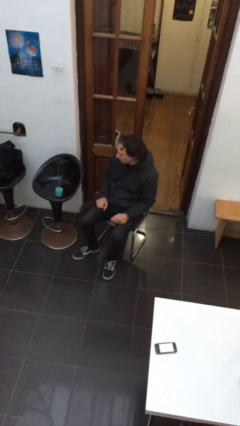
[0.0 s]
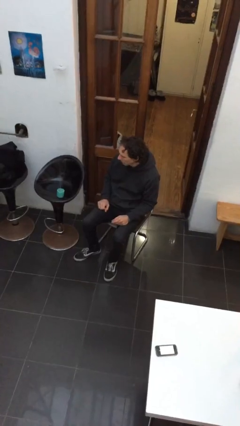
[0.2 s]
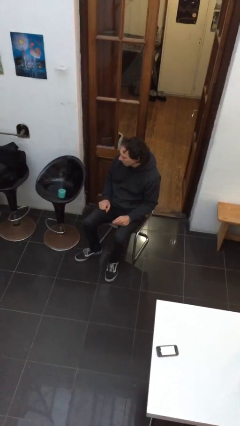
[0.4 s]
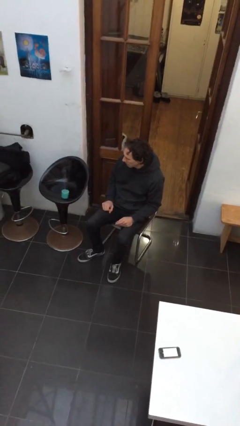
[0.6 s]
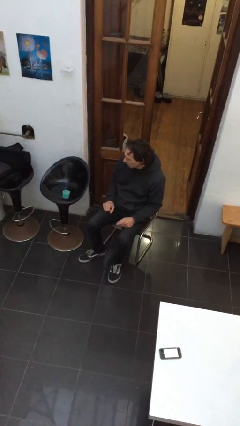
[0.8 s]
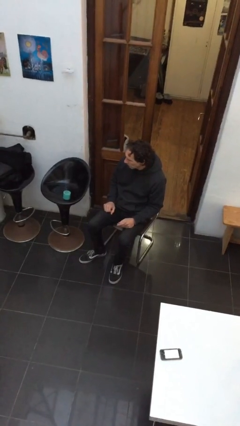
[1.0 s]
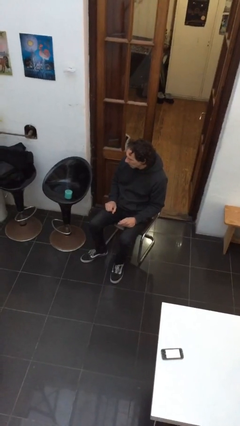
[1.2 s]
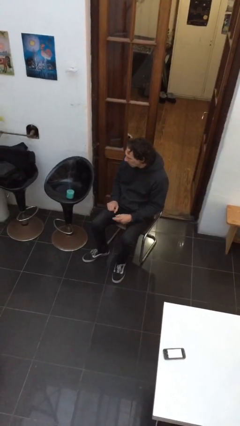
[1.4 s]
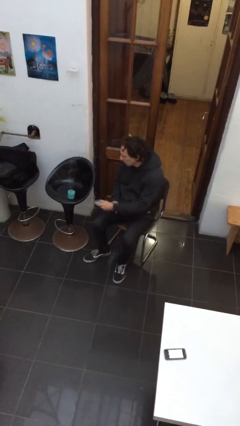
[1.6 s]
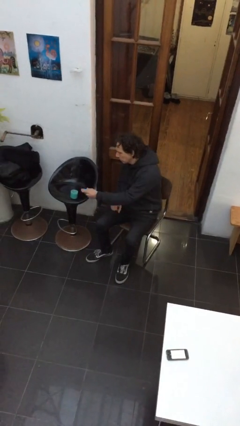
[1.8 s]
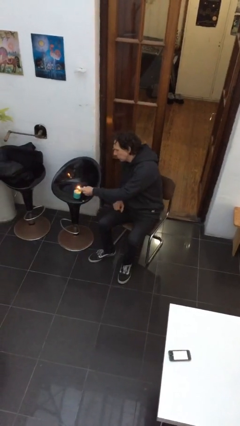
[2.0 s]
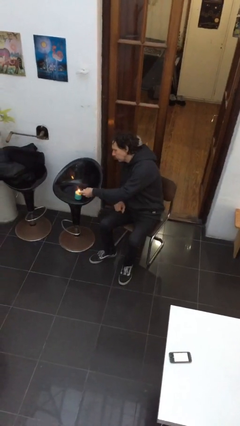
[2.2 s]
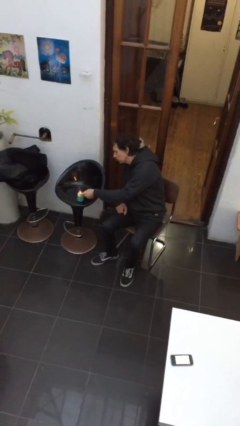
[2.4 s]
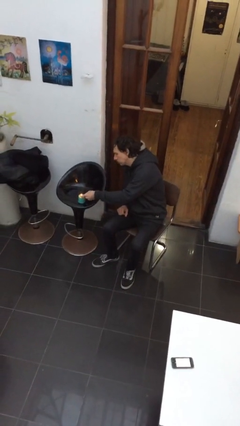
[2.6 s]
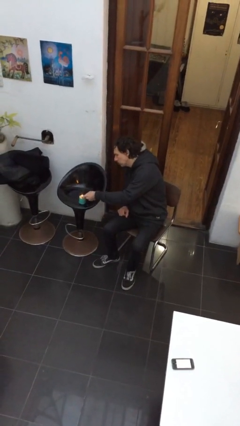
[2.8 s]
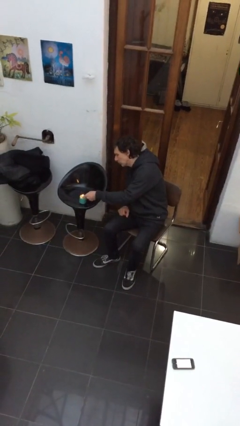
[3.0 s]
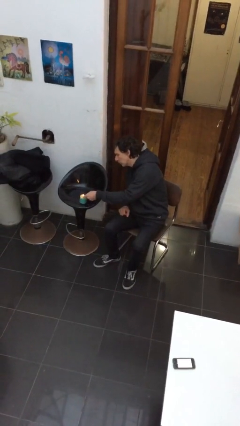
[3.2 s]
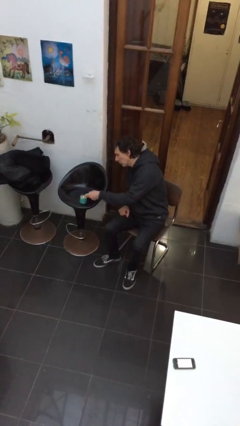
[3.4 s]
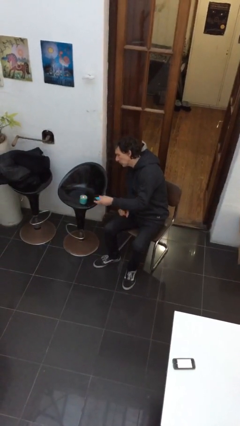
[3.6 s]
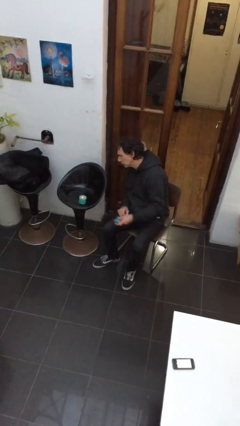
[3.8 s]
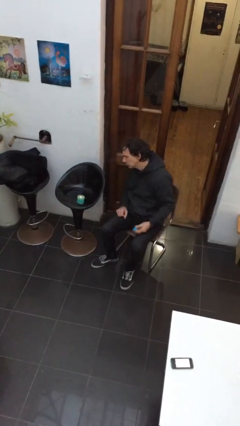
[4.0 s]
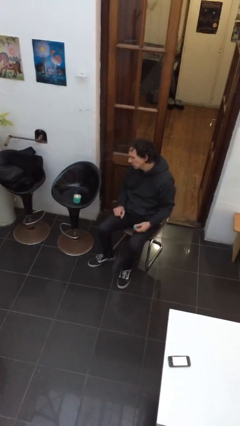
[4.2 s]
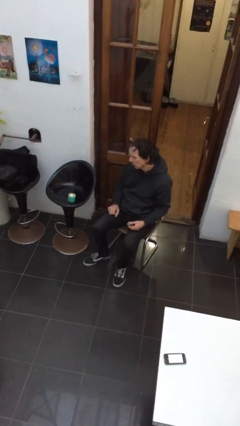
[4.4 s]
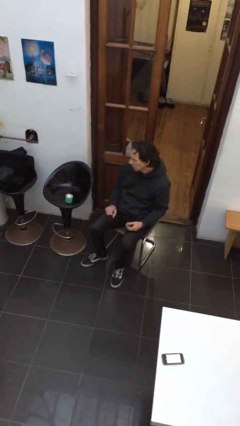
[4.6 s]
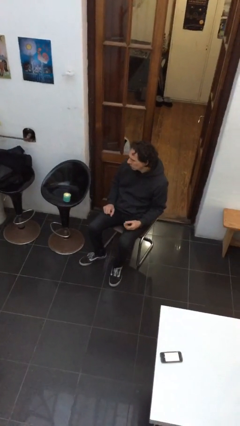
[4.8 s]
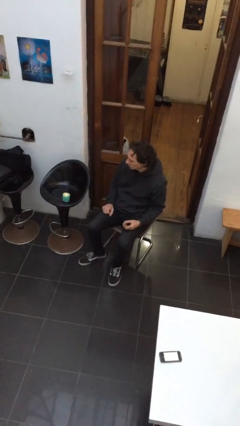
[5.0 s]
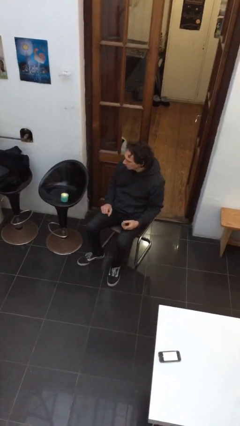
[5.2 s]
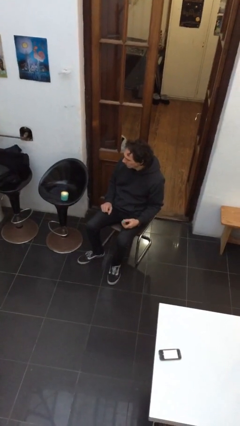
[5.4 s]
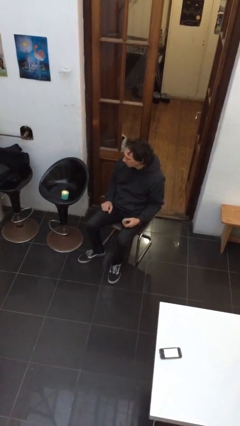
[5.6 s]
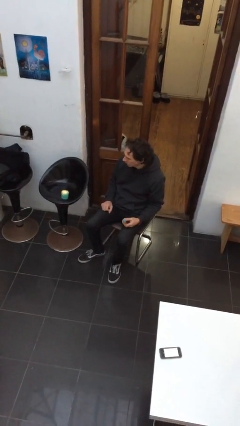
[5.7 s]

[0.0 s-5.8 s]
person lights candle

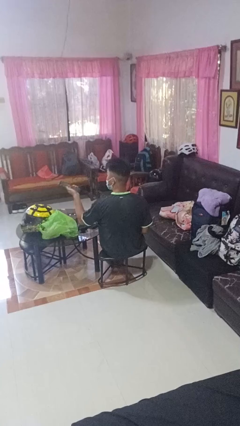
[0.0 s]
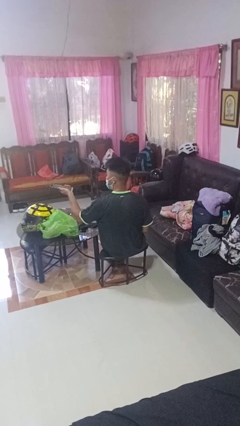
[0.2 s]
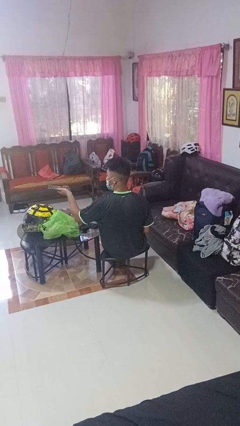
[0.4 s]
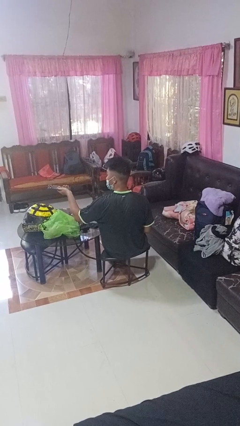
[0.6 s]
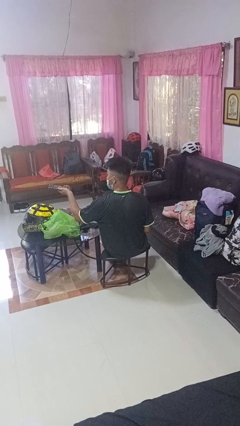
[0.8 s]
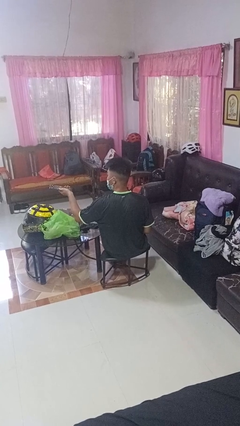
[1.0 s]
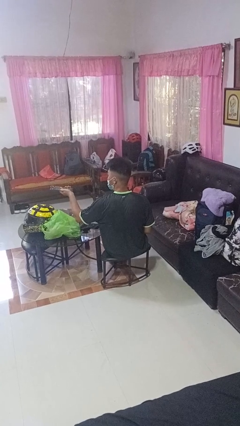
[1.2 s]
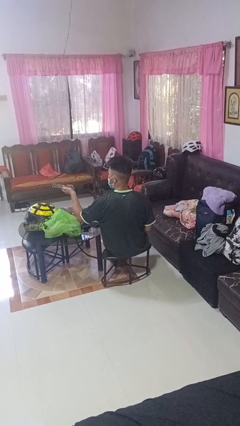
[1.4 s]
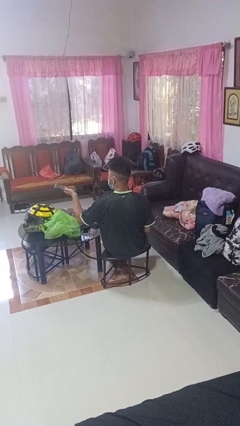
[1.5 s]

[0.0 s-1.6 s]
person uses television remote

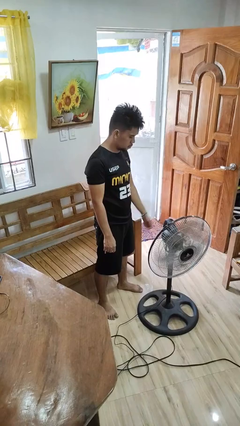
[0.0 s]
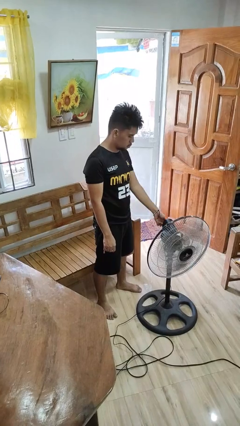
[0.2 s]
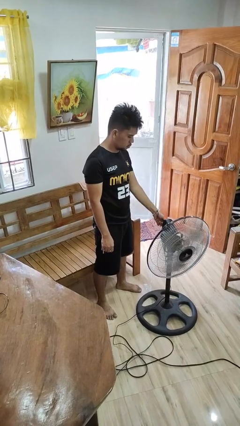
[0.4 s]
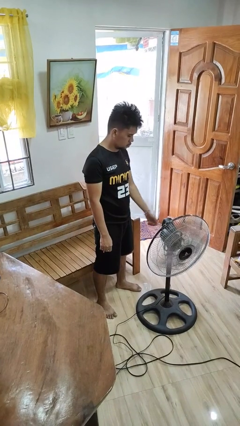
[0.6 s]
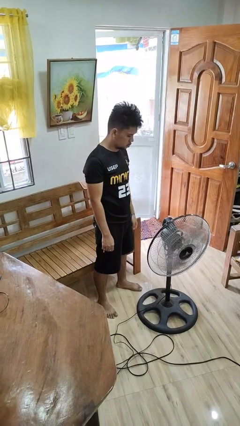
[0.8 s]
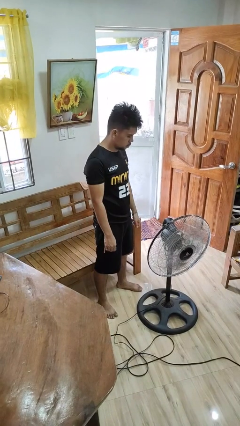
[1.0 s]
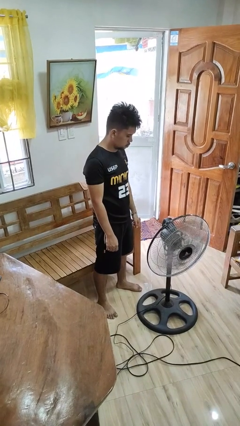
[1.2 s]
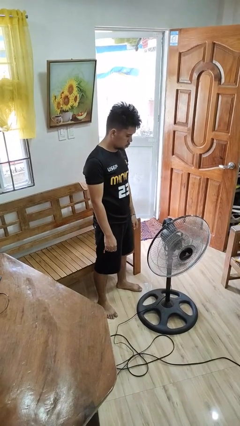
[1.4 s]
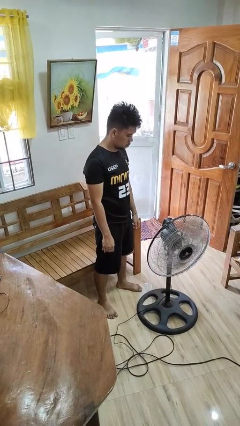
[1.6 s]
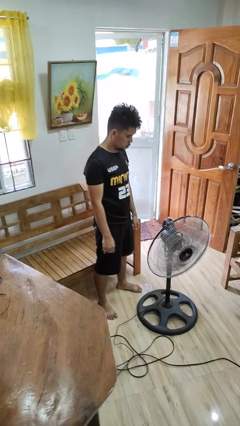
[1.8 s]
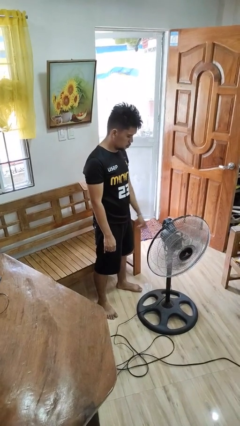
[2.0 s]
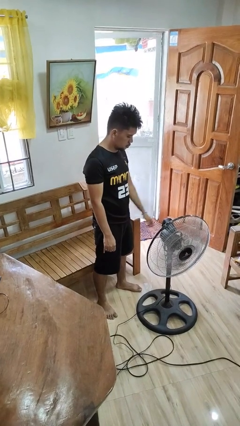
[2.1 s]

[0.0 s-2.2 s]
person turns on fan

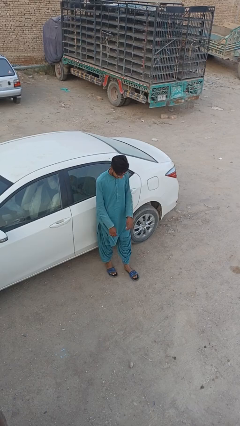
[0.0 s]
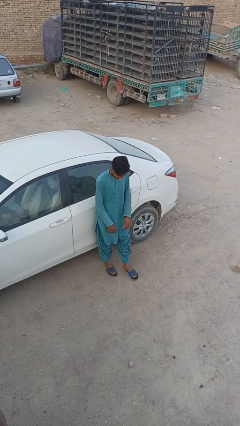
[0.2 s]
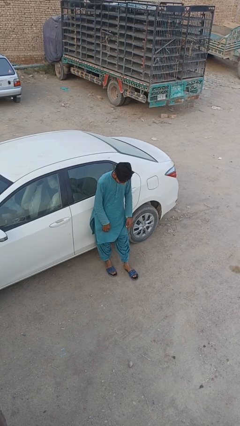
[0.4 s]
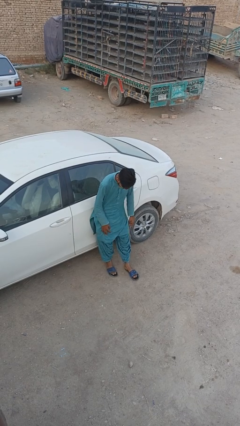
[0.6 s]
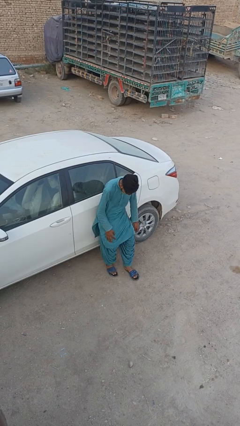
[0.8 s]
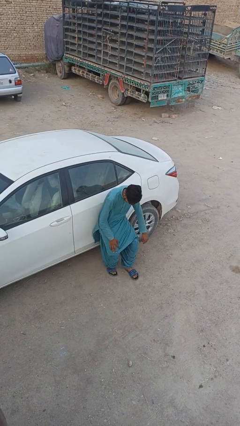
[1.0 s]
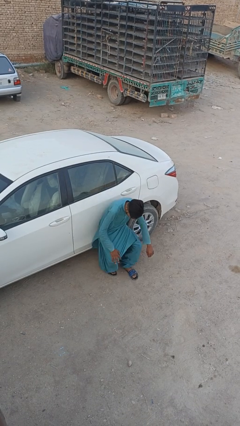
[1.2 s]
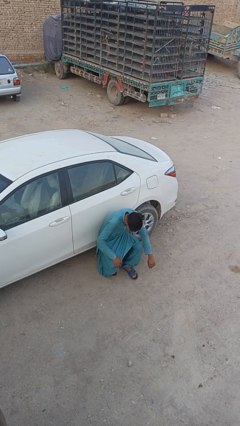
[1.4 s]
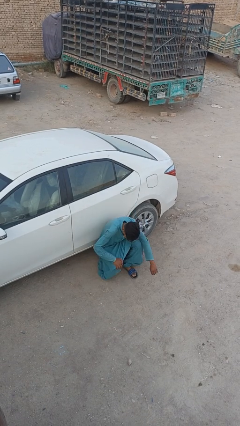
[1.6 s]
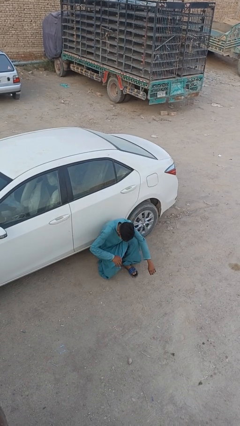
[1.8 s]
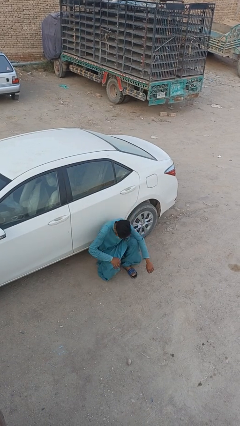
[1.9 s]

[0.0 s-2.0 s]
person leans against car

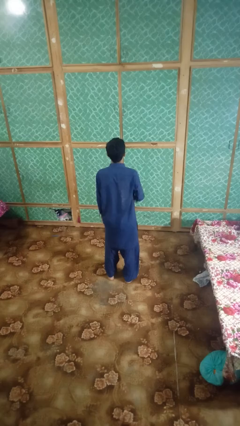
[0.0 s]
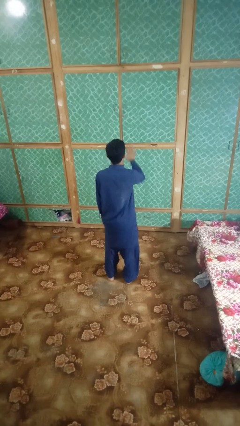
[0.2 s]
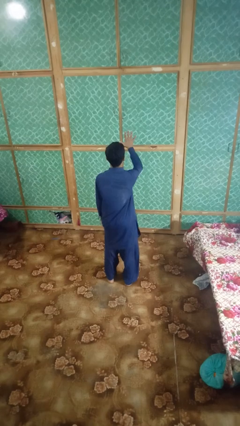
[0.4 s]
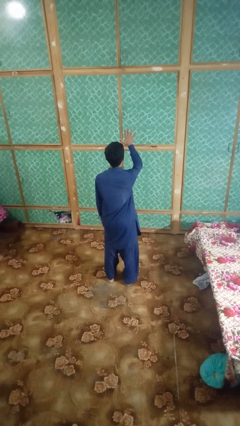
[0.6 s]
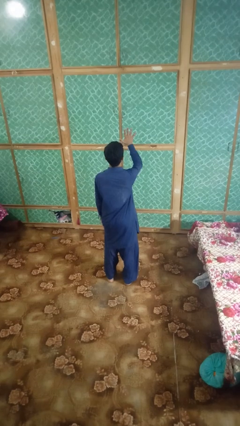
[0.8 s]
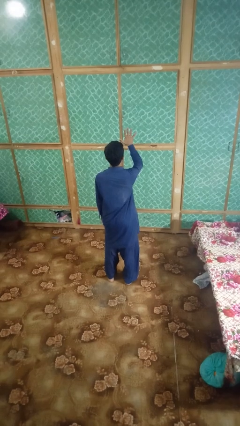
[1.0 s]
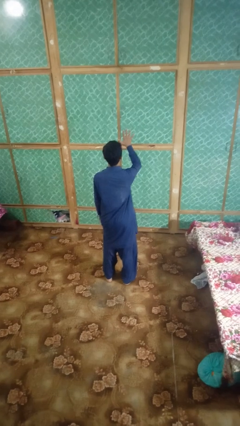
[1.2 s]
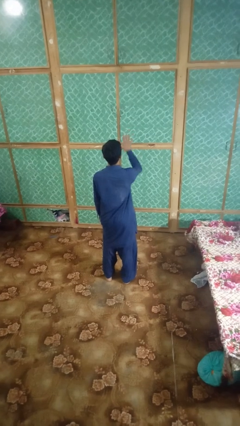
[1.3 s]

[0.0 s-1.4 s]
person gestures number five

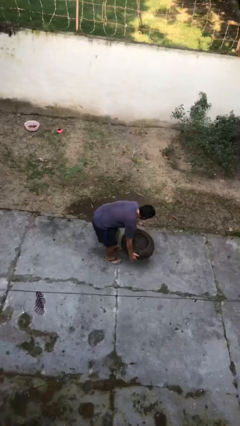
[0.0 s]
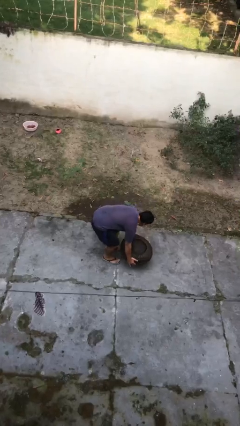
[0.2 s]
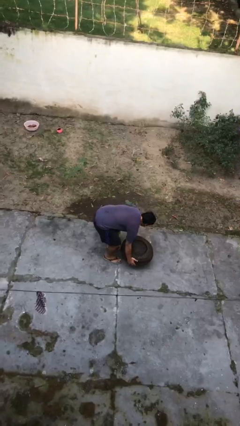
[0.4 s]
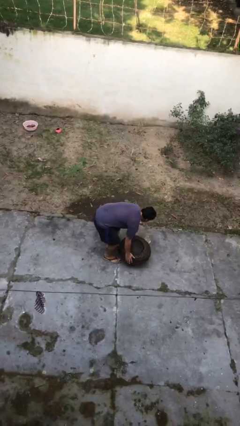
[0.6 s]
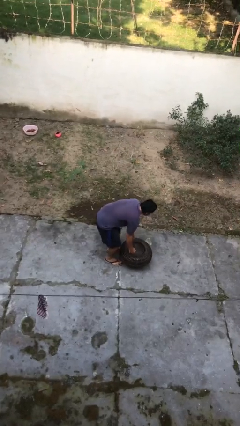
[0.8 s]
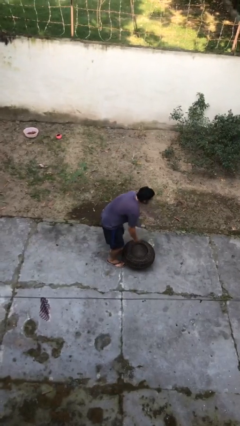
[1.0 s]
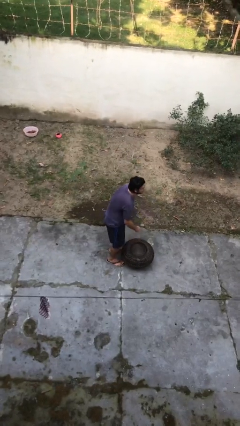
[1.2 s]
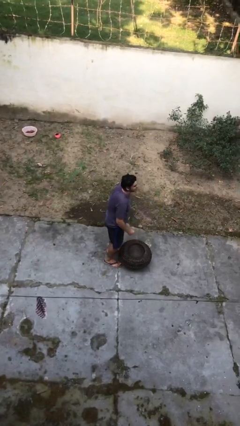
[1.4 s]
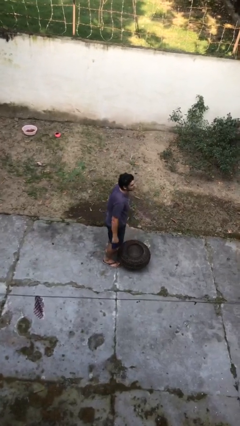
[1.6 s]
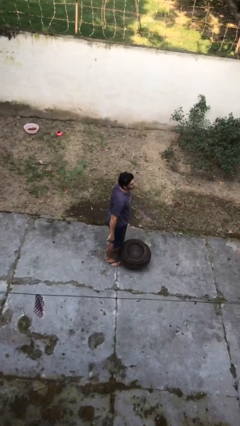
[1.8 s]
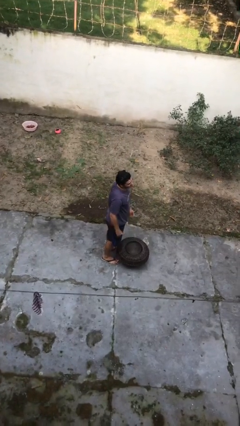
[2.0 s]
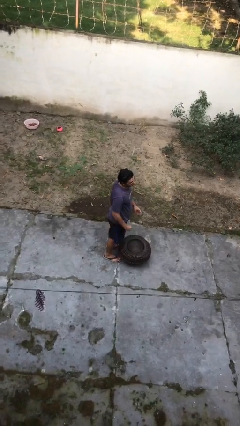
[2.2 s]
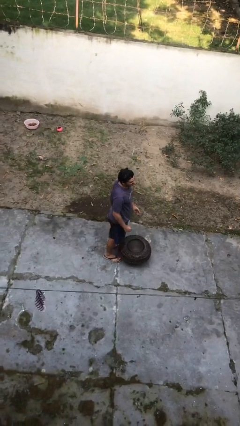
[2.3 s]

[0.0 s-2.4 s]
person puts down object on floor

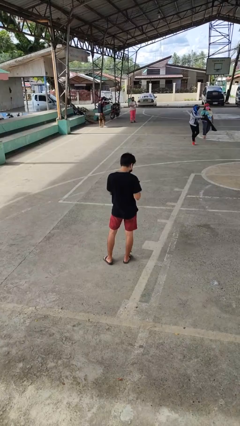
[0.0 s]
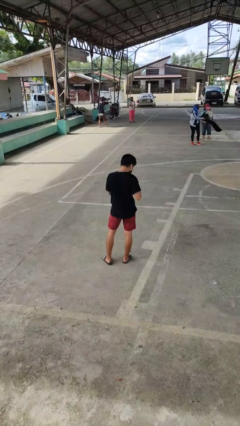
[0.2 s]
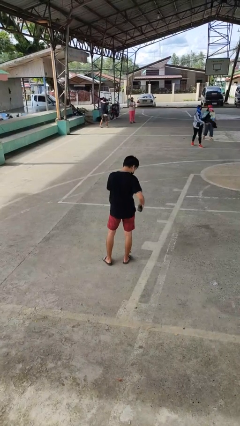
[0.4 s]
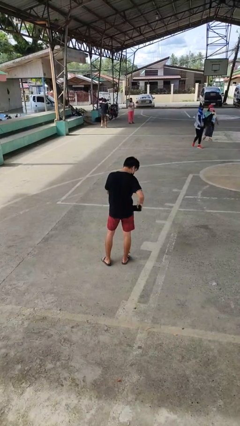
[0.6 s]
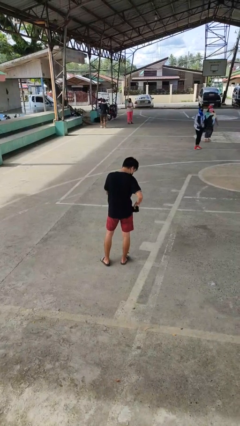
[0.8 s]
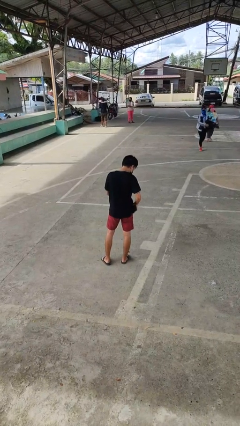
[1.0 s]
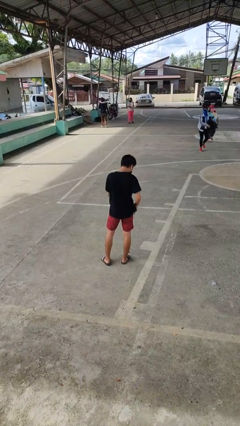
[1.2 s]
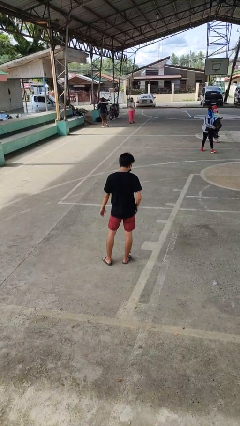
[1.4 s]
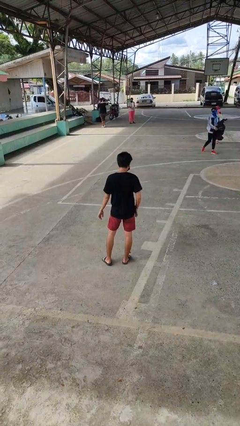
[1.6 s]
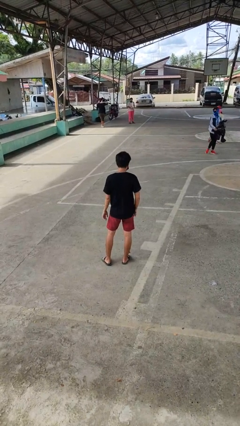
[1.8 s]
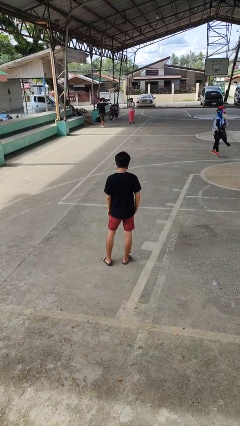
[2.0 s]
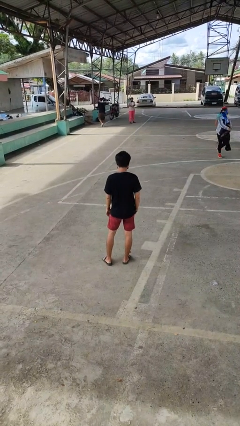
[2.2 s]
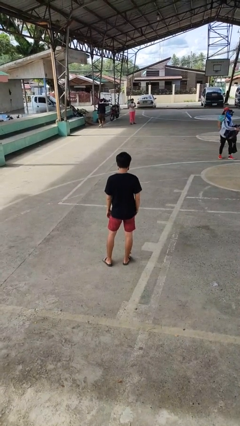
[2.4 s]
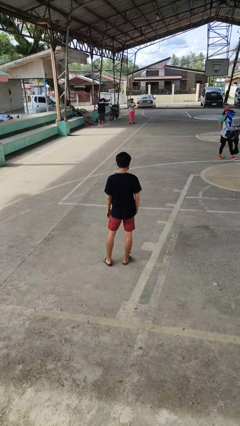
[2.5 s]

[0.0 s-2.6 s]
person puts phone into pocket
